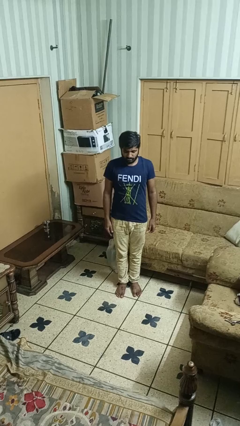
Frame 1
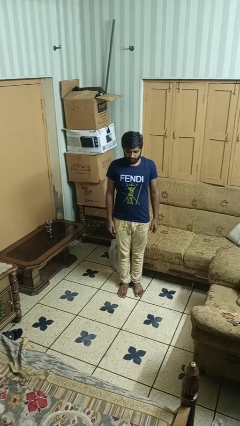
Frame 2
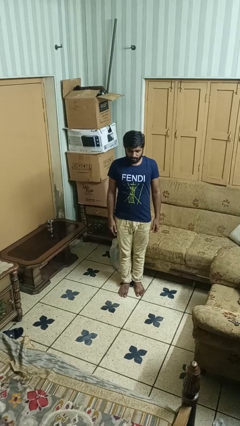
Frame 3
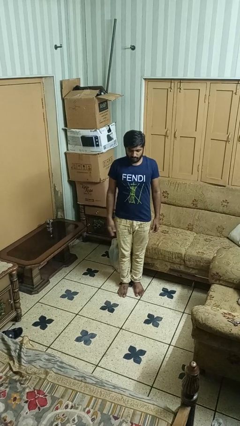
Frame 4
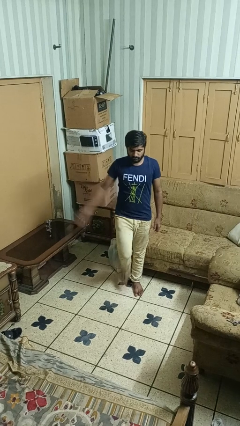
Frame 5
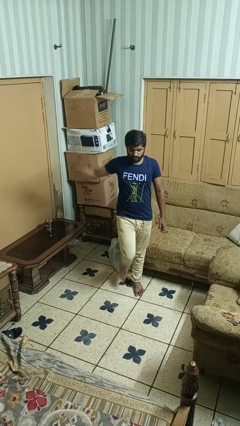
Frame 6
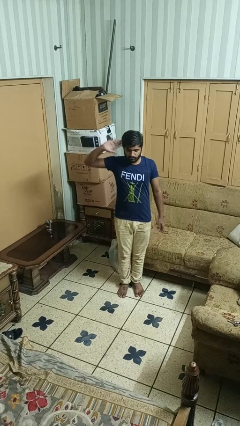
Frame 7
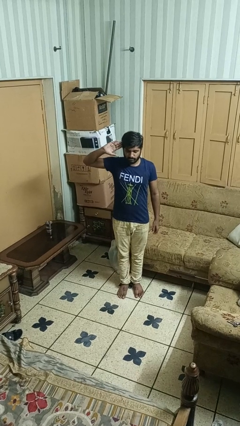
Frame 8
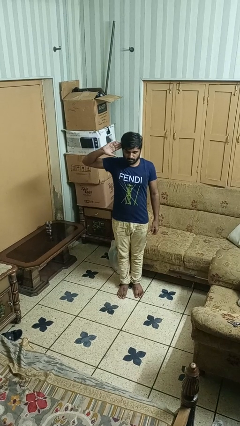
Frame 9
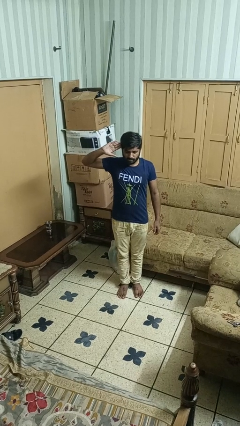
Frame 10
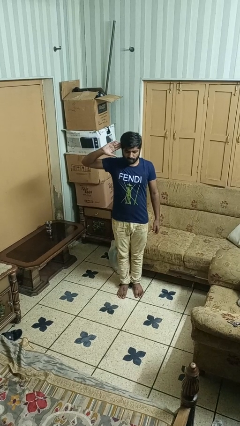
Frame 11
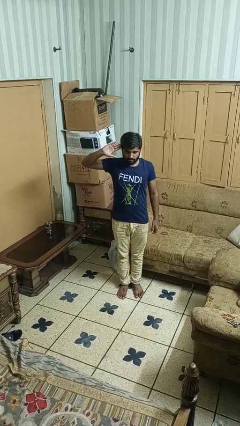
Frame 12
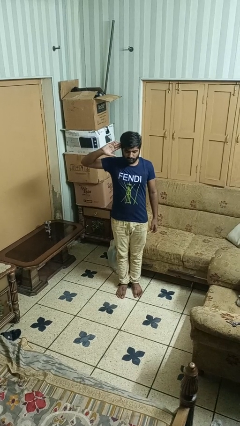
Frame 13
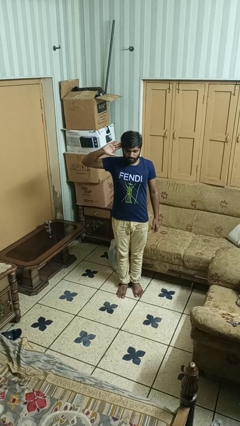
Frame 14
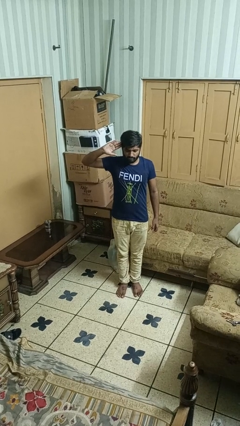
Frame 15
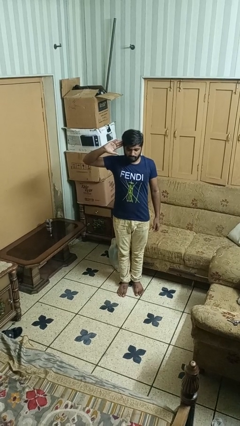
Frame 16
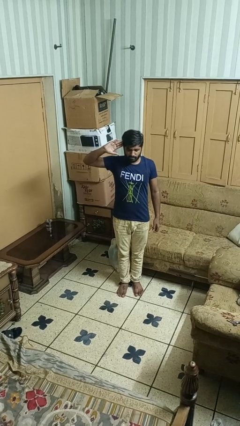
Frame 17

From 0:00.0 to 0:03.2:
person salutes

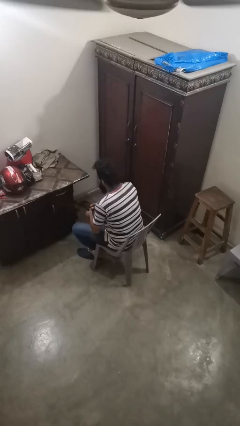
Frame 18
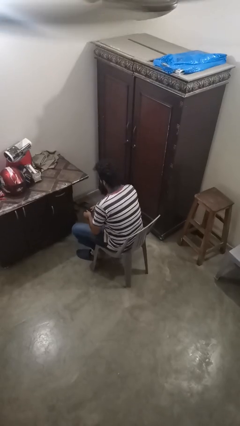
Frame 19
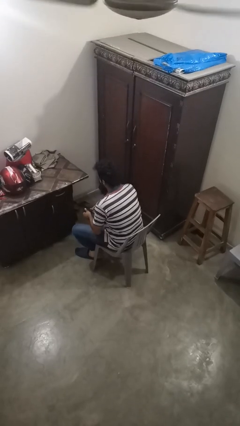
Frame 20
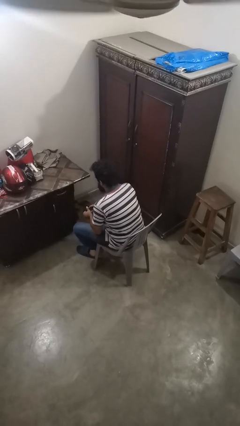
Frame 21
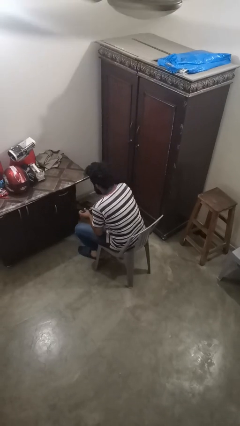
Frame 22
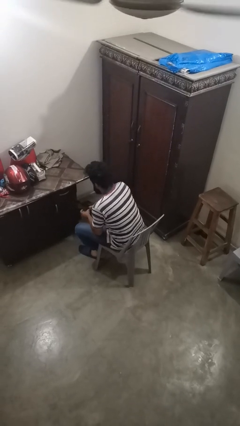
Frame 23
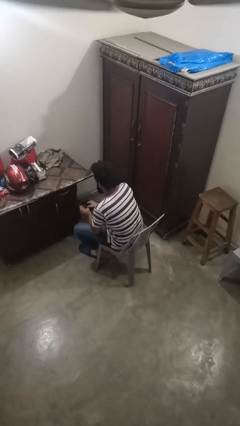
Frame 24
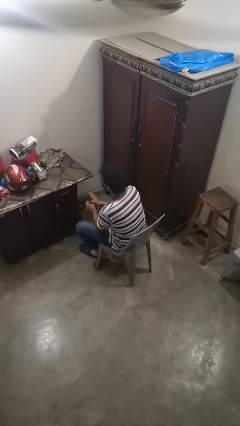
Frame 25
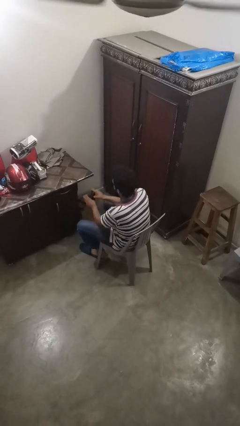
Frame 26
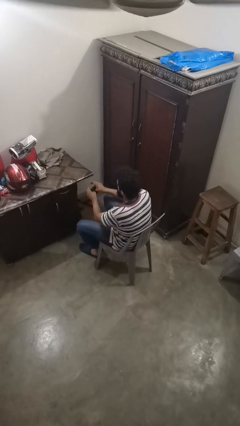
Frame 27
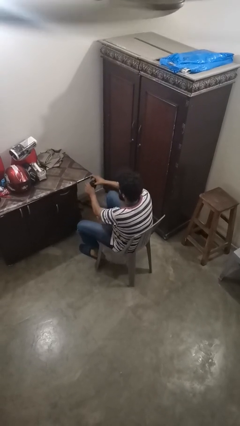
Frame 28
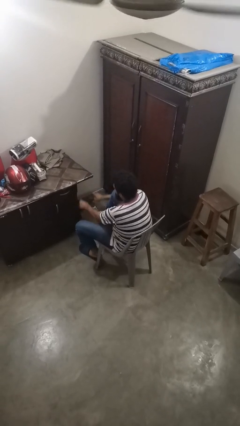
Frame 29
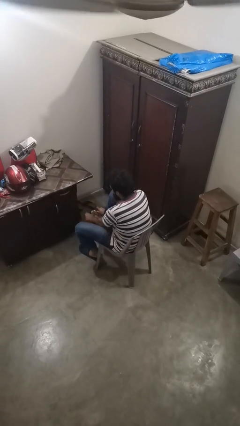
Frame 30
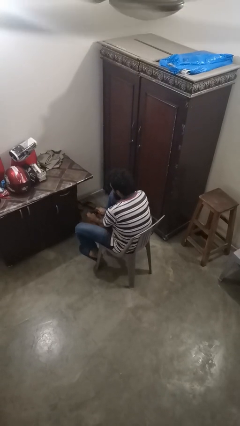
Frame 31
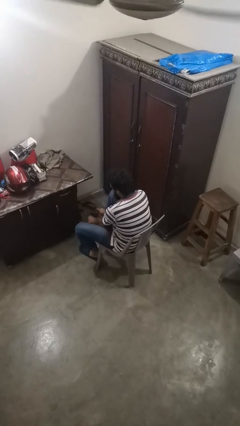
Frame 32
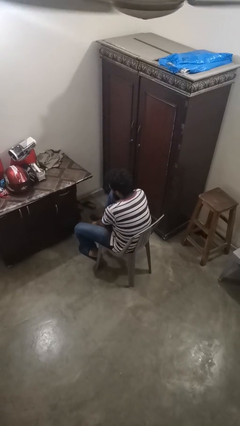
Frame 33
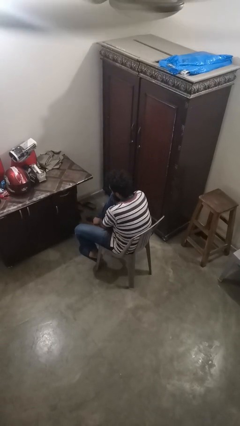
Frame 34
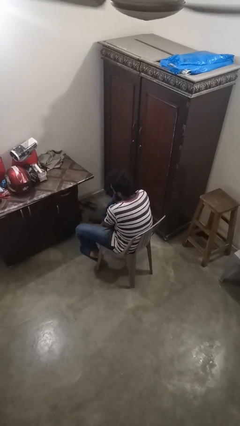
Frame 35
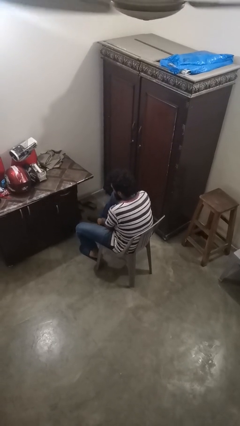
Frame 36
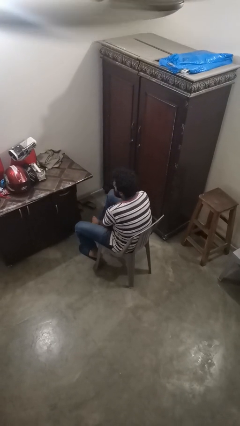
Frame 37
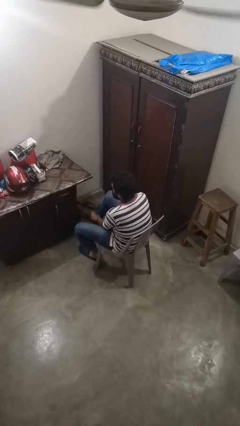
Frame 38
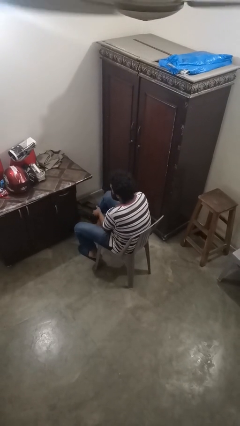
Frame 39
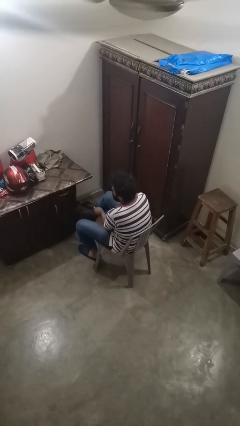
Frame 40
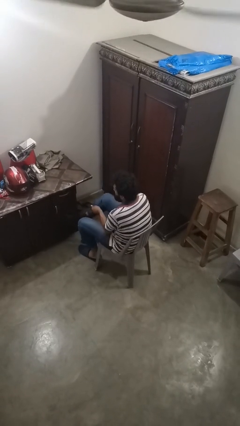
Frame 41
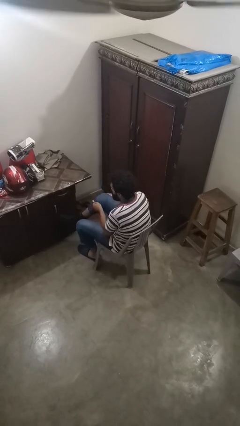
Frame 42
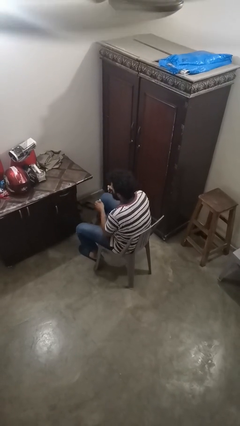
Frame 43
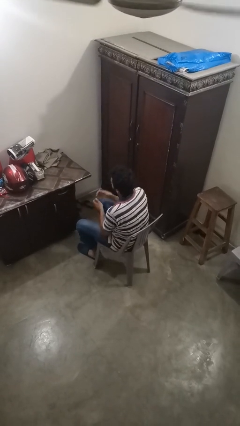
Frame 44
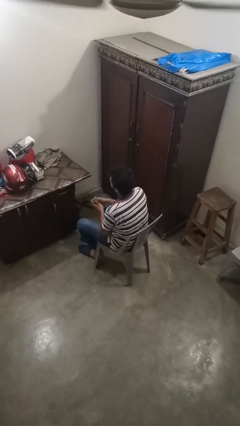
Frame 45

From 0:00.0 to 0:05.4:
person puts on socks

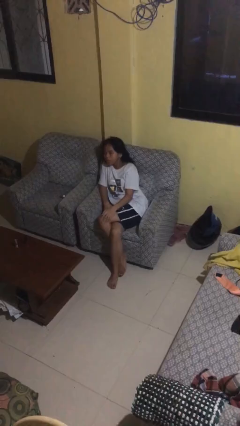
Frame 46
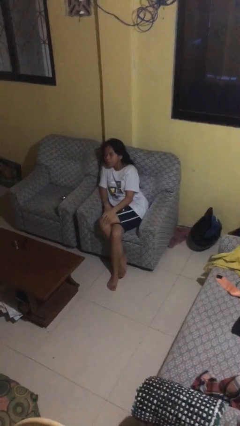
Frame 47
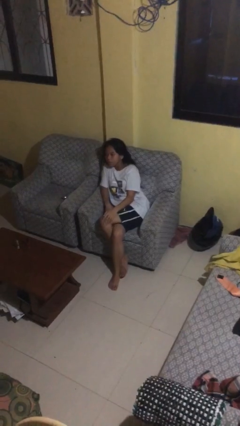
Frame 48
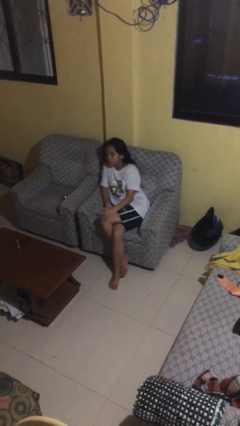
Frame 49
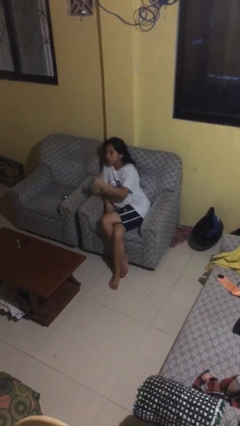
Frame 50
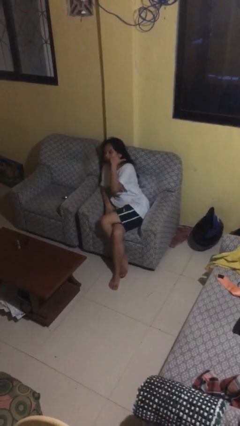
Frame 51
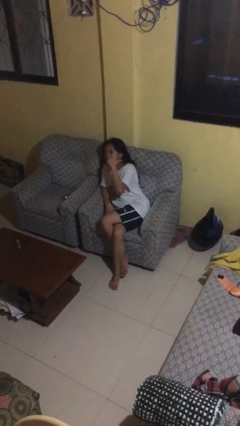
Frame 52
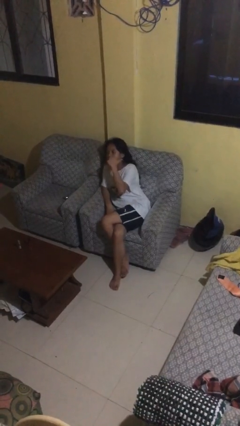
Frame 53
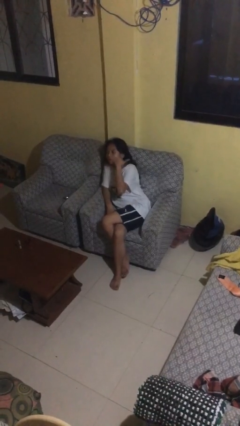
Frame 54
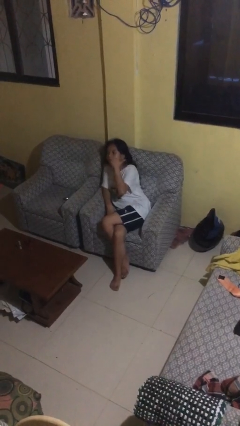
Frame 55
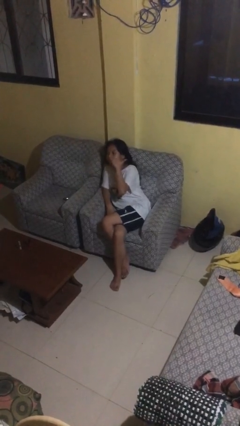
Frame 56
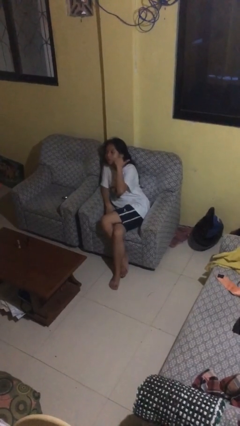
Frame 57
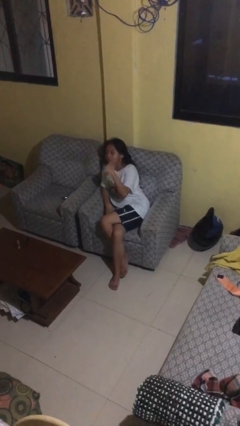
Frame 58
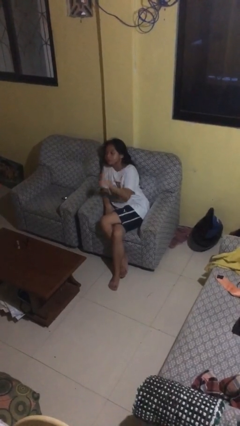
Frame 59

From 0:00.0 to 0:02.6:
person gestures behind me

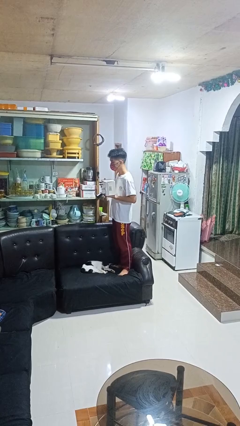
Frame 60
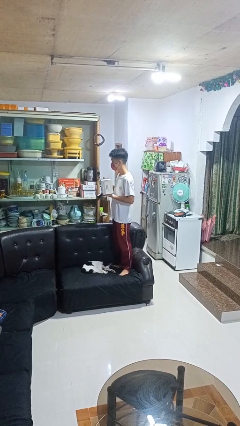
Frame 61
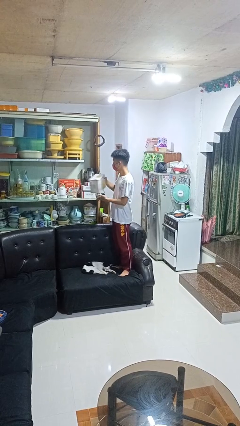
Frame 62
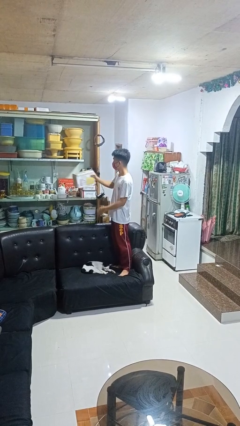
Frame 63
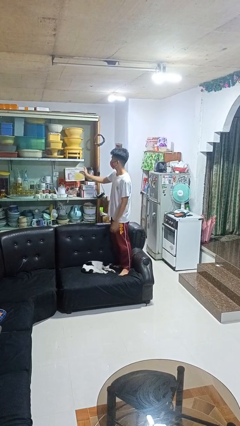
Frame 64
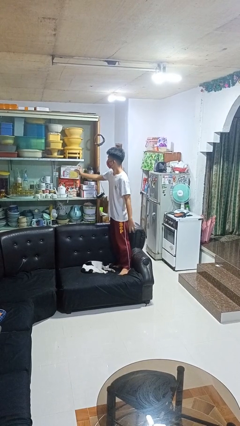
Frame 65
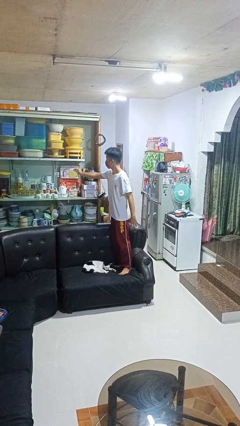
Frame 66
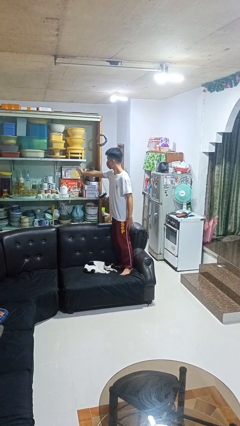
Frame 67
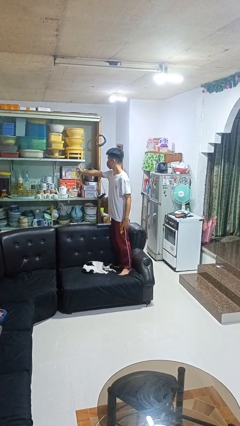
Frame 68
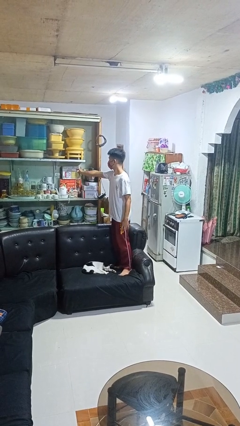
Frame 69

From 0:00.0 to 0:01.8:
person puts down object into cabinet

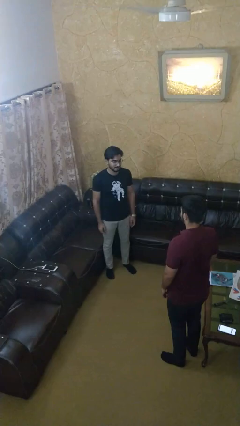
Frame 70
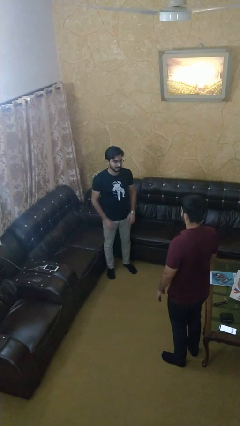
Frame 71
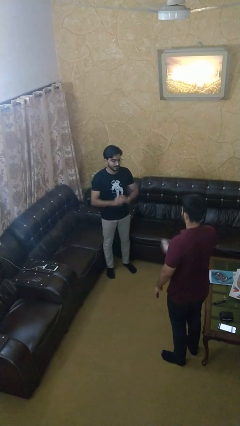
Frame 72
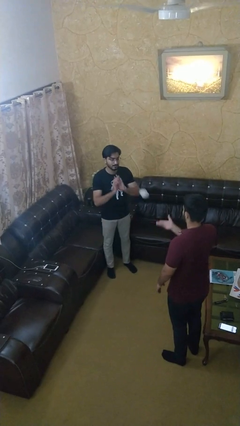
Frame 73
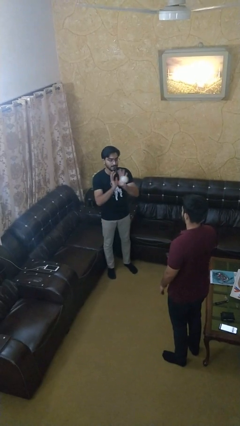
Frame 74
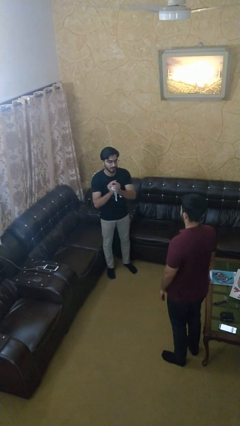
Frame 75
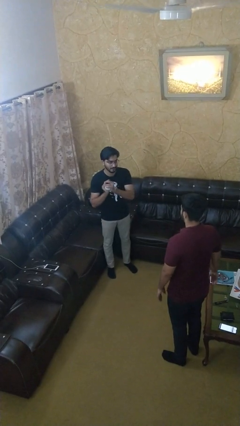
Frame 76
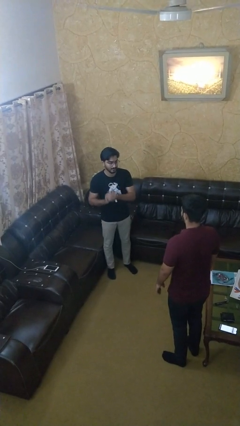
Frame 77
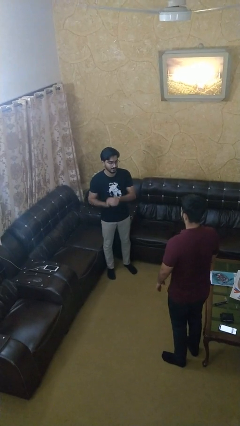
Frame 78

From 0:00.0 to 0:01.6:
person catches object from person

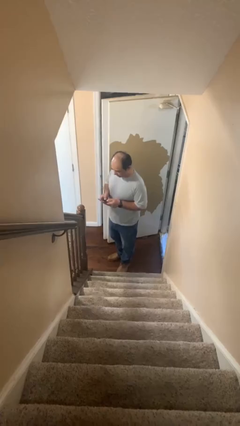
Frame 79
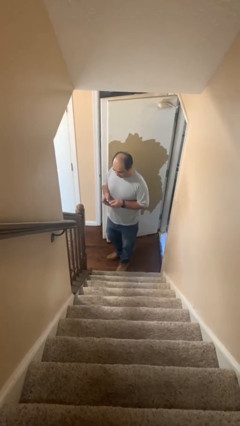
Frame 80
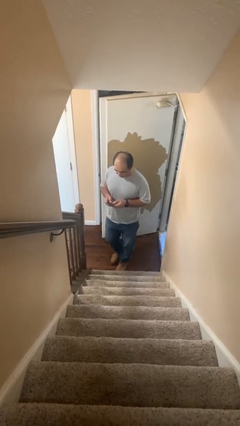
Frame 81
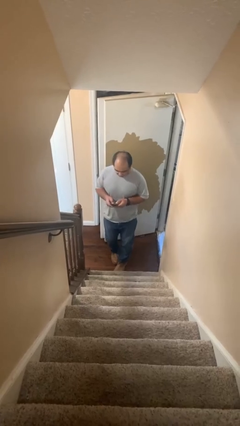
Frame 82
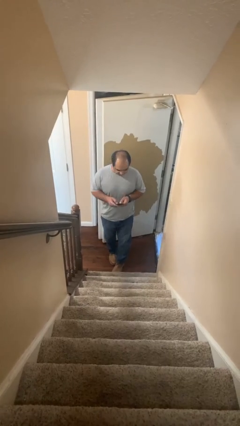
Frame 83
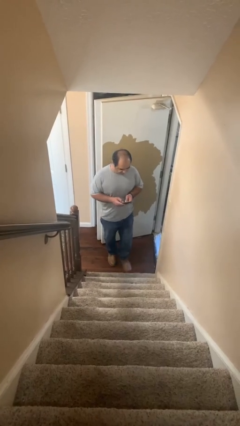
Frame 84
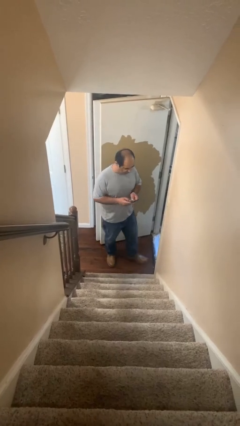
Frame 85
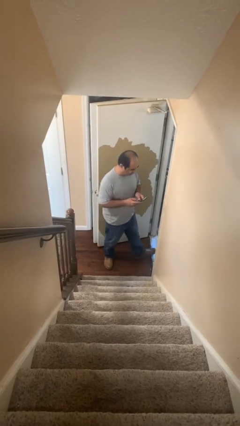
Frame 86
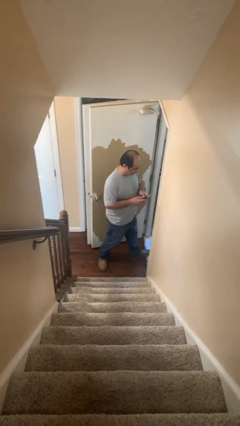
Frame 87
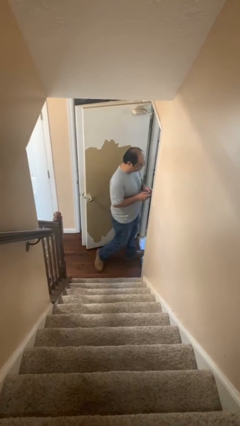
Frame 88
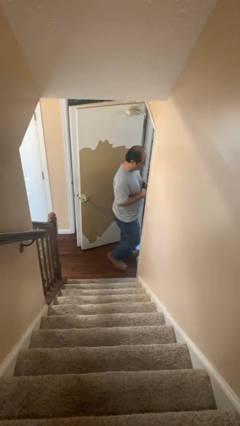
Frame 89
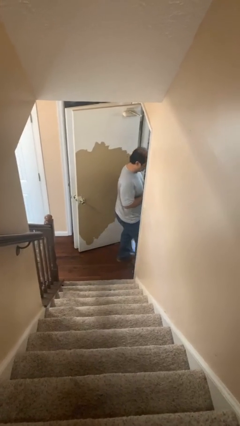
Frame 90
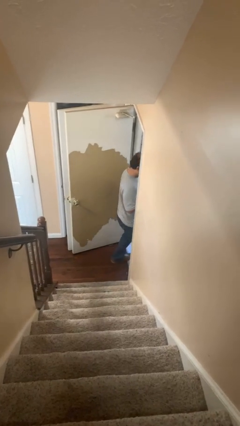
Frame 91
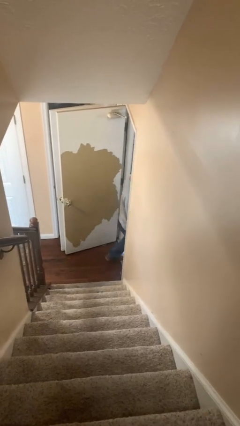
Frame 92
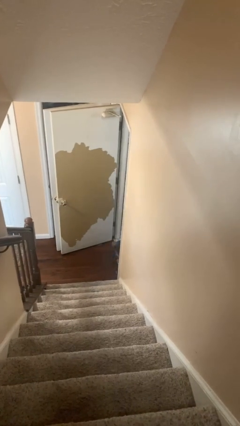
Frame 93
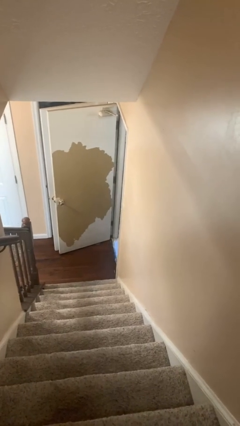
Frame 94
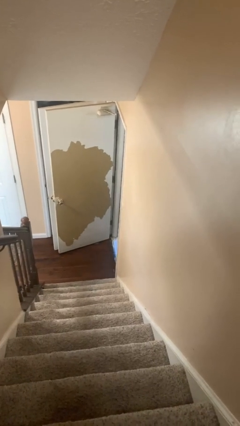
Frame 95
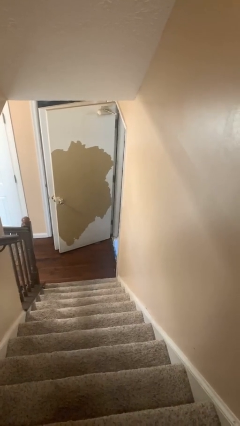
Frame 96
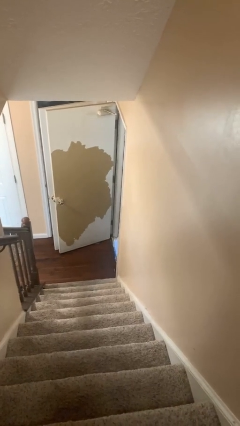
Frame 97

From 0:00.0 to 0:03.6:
person exits scene through structure
